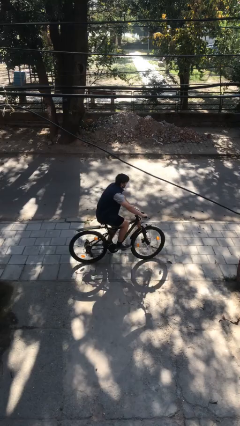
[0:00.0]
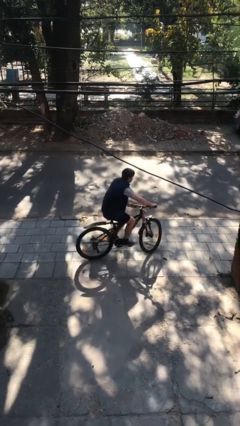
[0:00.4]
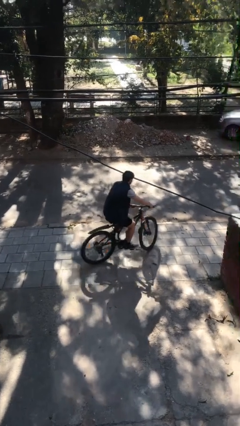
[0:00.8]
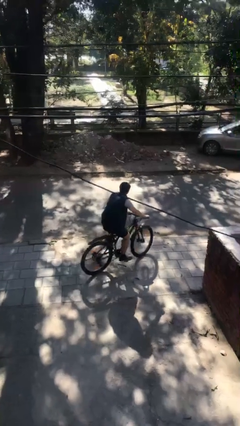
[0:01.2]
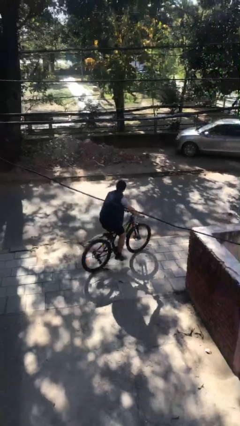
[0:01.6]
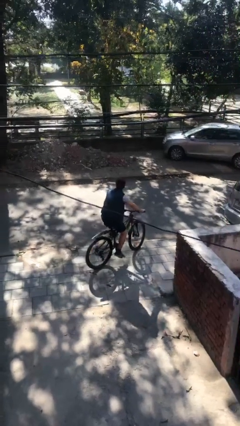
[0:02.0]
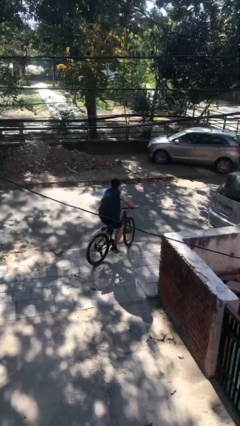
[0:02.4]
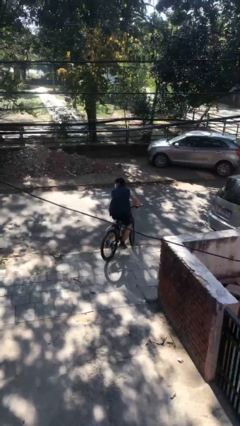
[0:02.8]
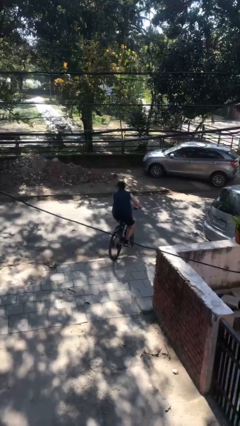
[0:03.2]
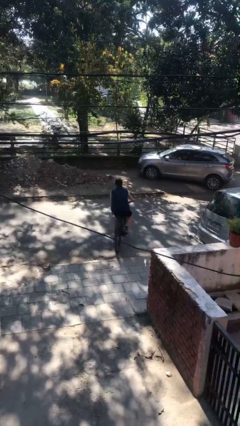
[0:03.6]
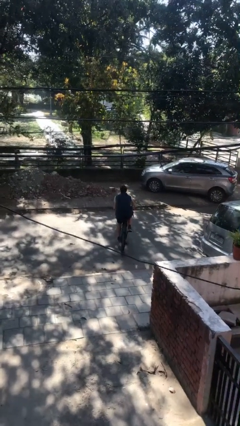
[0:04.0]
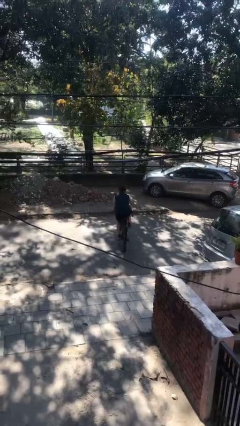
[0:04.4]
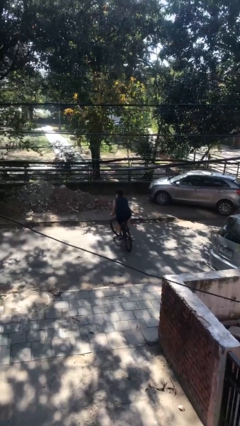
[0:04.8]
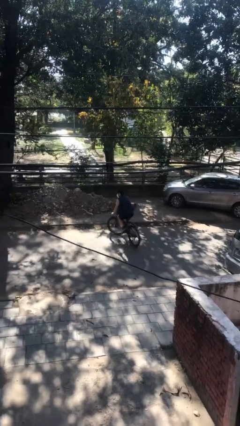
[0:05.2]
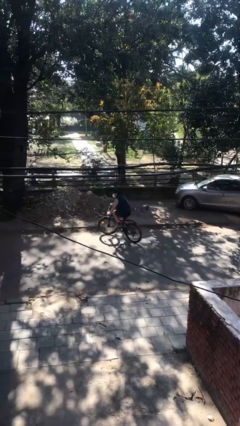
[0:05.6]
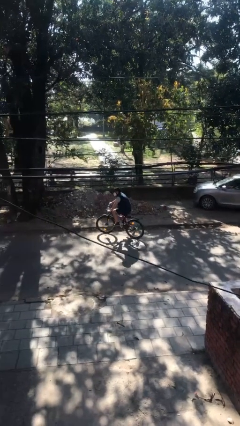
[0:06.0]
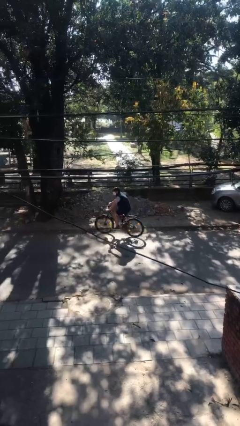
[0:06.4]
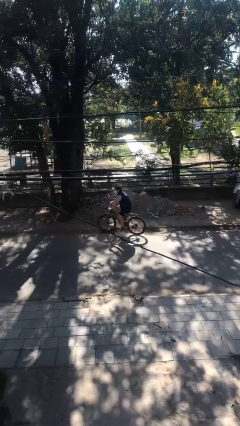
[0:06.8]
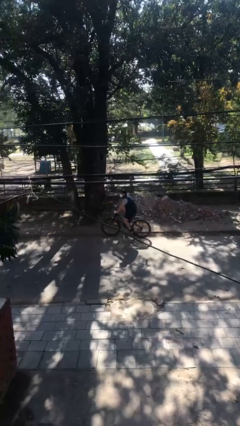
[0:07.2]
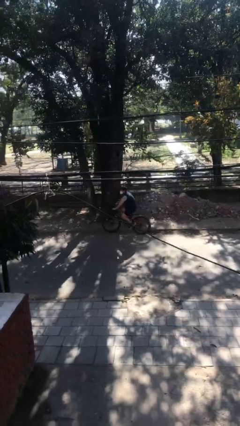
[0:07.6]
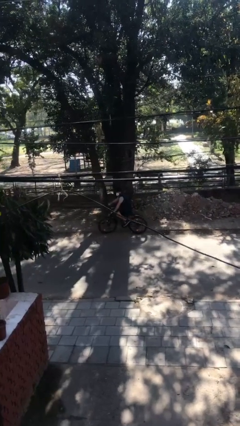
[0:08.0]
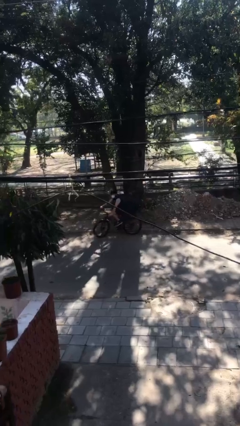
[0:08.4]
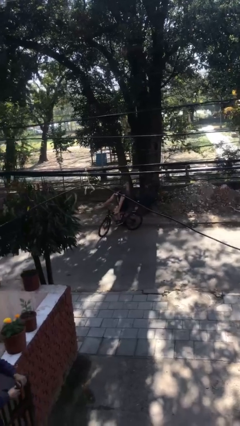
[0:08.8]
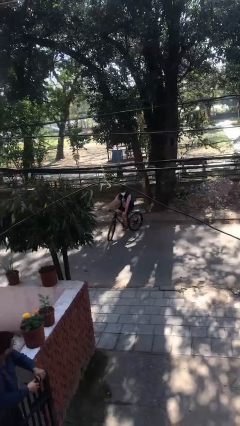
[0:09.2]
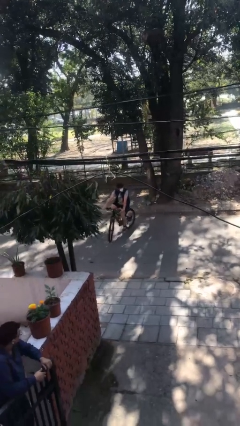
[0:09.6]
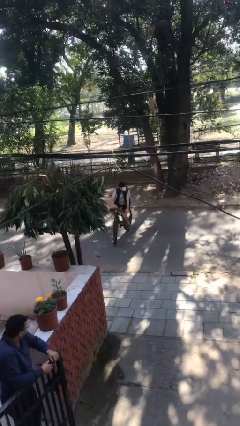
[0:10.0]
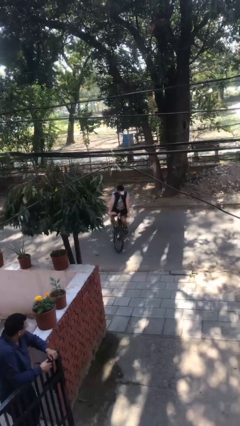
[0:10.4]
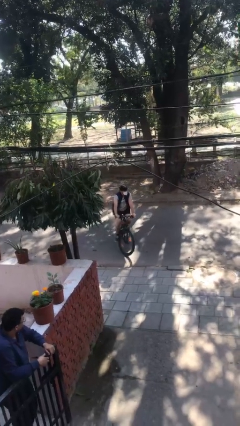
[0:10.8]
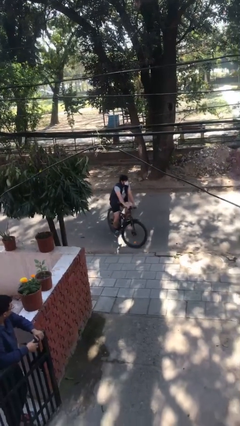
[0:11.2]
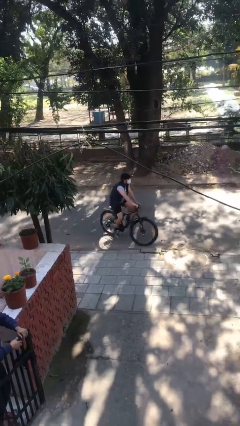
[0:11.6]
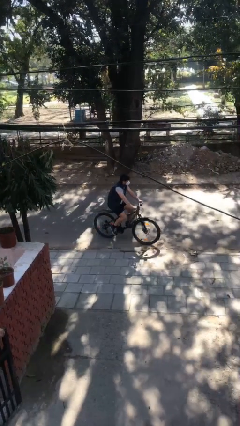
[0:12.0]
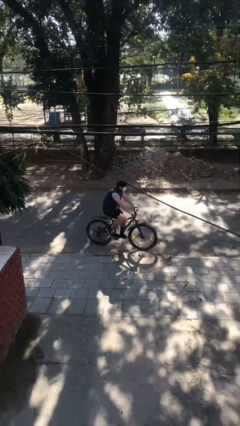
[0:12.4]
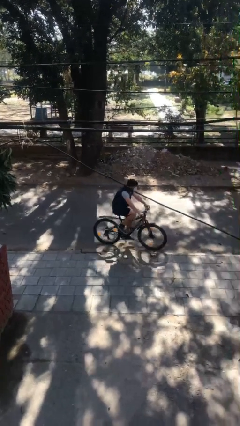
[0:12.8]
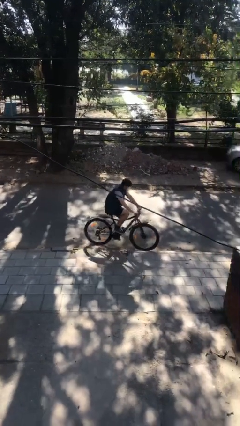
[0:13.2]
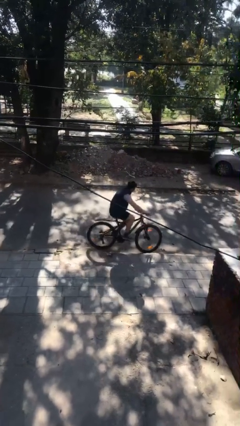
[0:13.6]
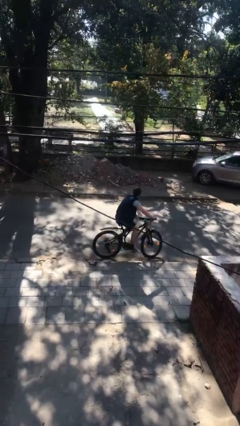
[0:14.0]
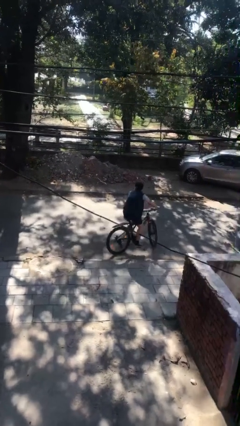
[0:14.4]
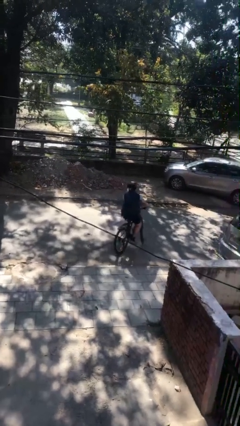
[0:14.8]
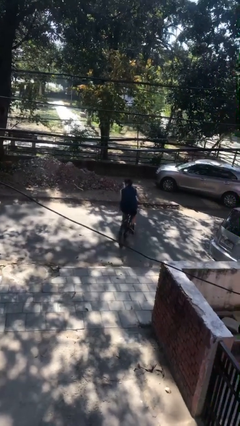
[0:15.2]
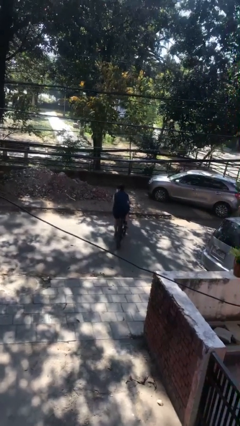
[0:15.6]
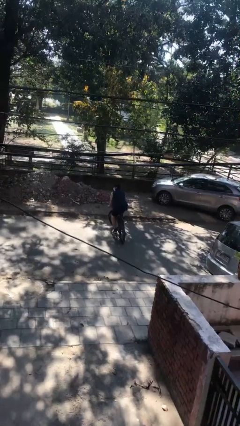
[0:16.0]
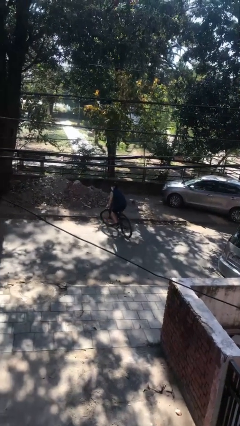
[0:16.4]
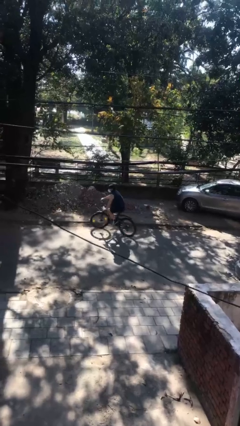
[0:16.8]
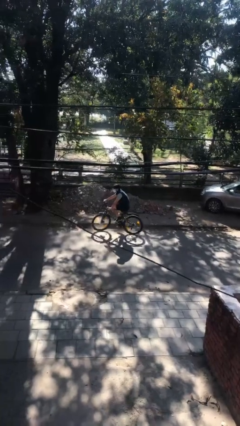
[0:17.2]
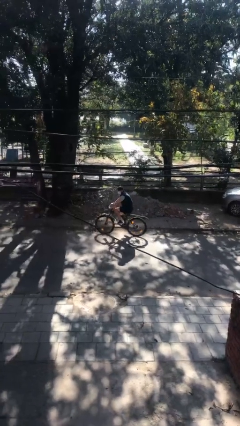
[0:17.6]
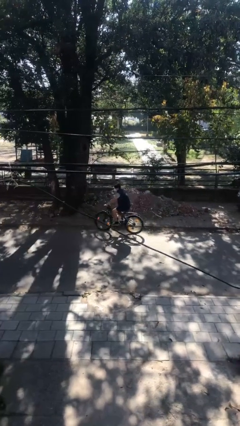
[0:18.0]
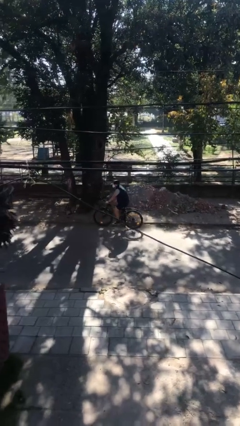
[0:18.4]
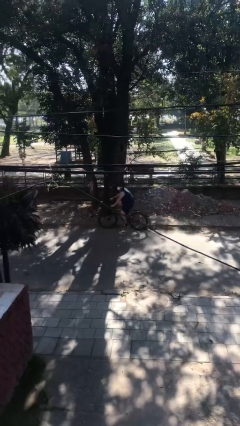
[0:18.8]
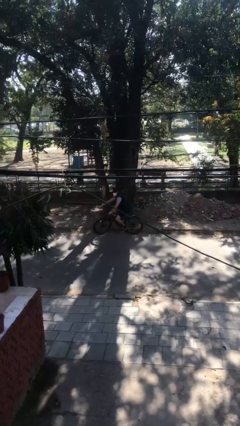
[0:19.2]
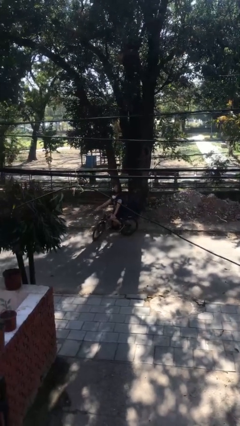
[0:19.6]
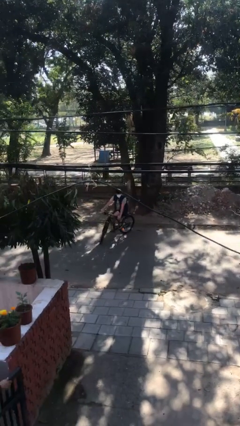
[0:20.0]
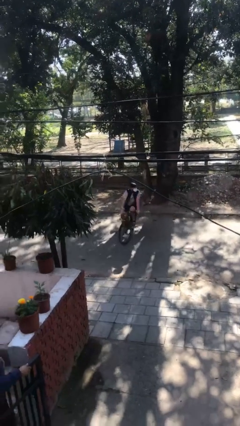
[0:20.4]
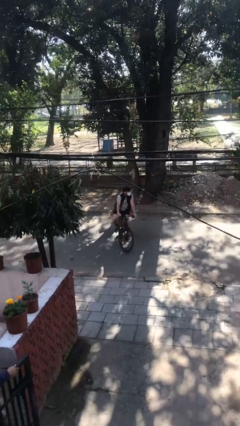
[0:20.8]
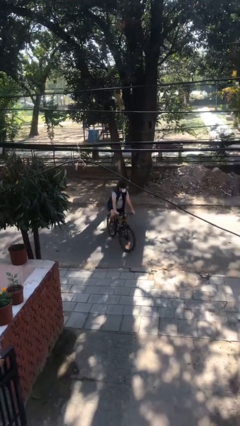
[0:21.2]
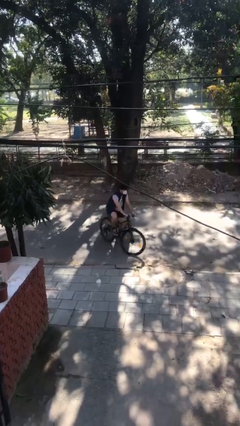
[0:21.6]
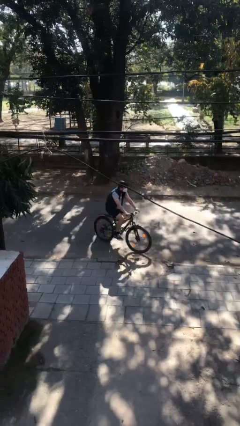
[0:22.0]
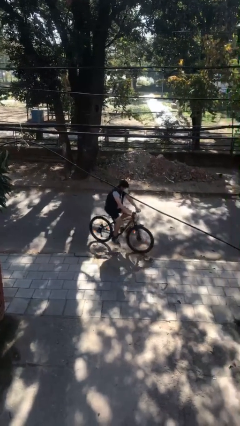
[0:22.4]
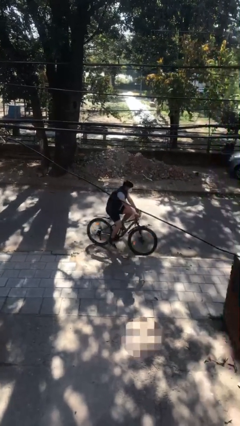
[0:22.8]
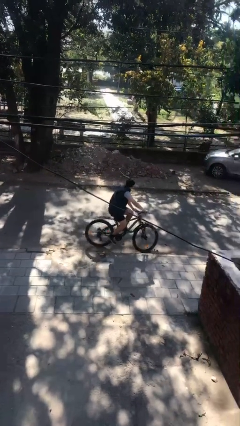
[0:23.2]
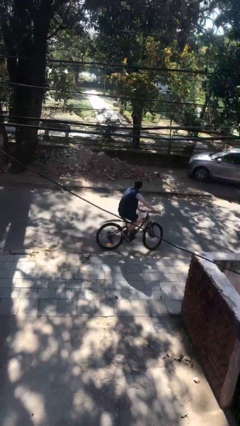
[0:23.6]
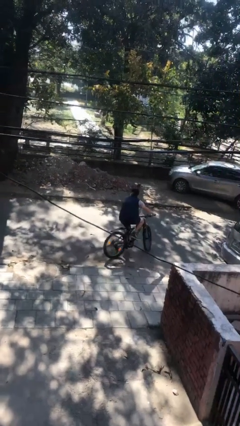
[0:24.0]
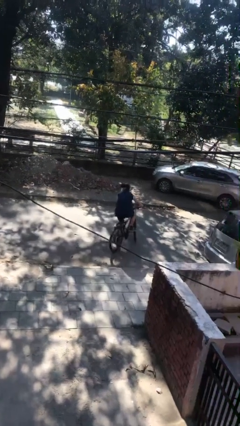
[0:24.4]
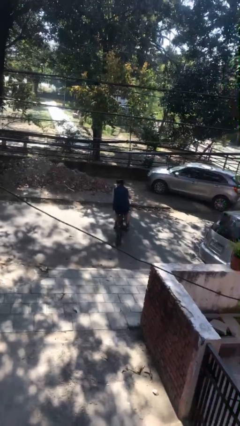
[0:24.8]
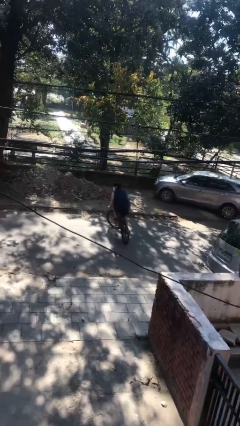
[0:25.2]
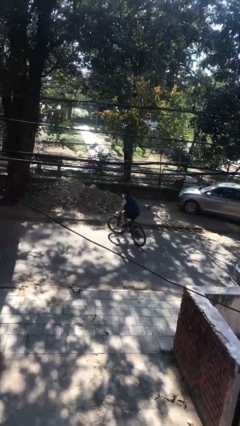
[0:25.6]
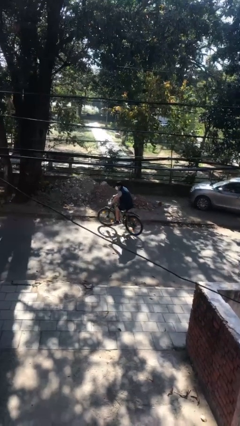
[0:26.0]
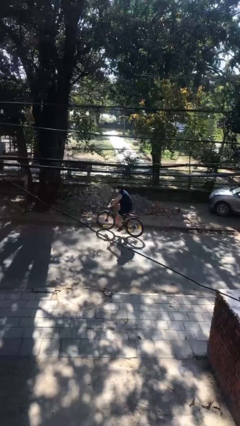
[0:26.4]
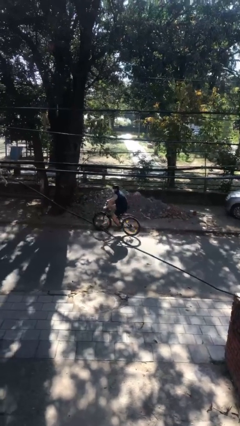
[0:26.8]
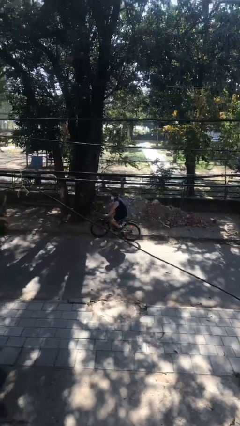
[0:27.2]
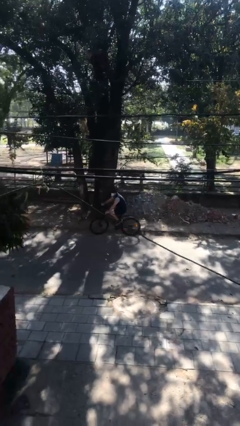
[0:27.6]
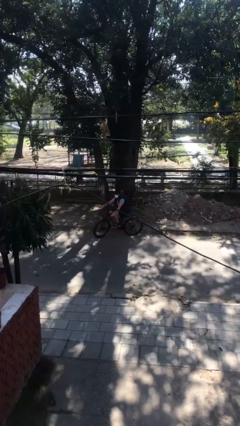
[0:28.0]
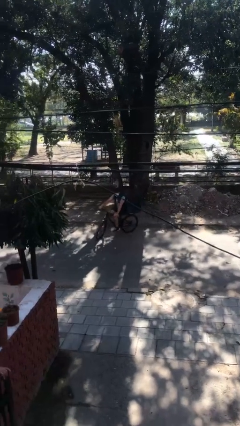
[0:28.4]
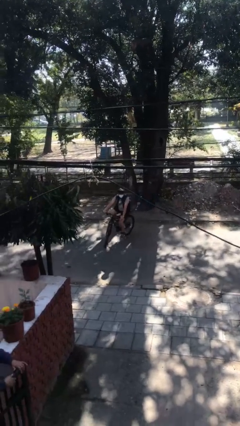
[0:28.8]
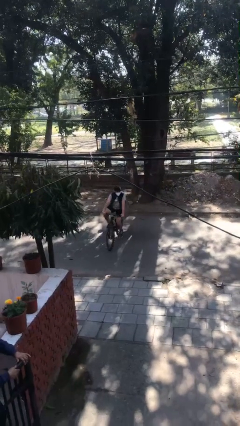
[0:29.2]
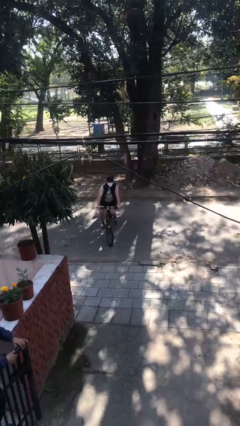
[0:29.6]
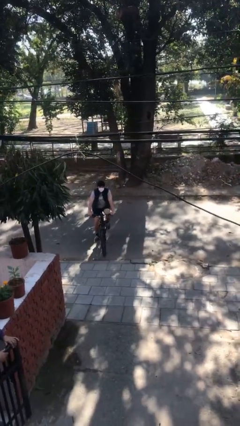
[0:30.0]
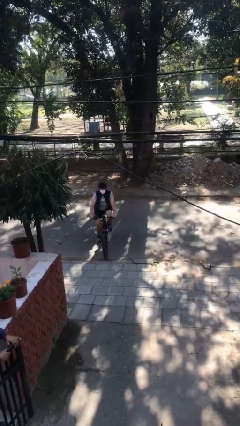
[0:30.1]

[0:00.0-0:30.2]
person rides bicycle

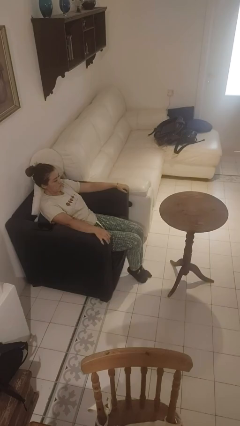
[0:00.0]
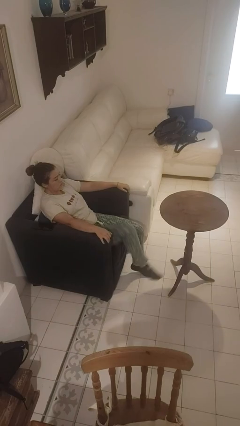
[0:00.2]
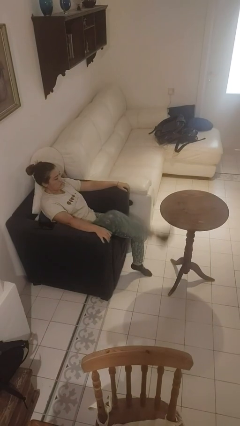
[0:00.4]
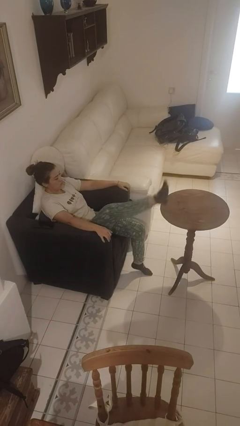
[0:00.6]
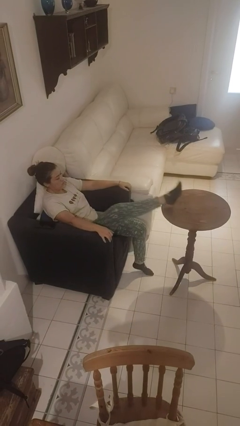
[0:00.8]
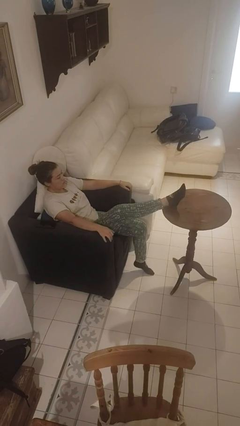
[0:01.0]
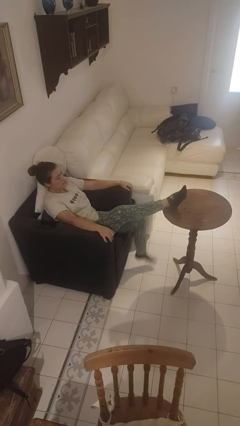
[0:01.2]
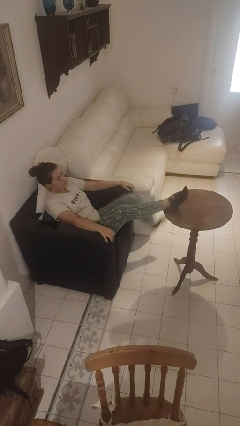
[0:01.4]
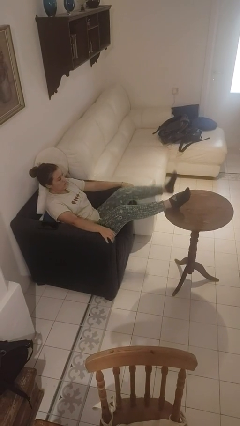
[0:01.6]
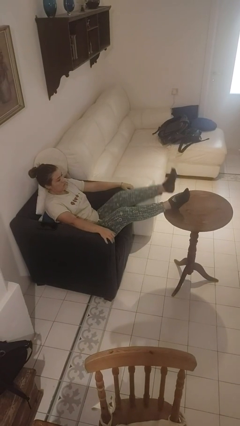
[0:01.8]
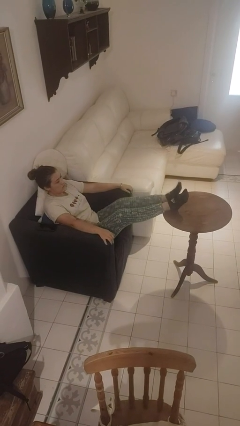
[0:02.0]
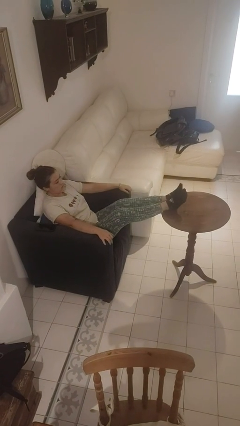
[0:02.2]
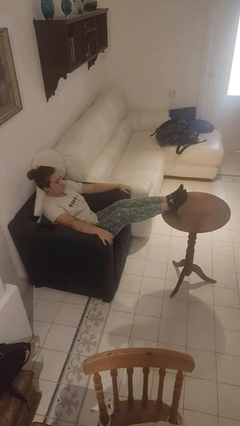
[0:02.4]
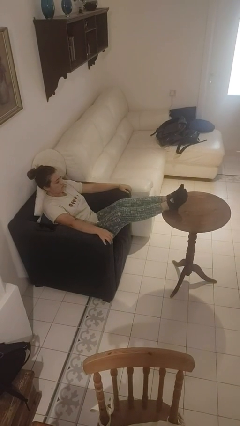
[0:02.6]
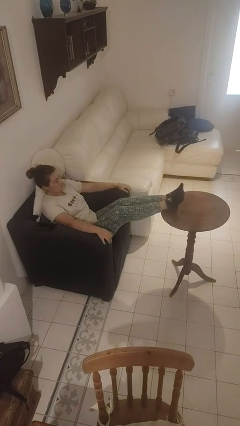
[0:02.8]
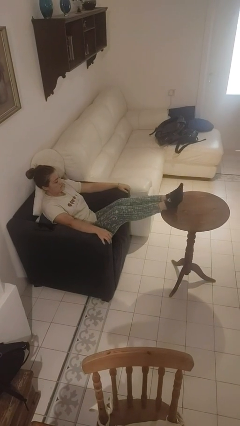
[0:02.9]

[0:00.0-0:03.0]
person puts feet up

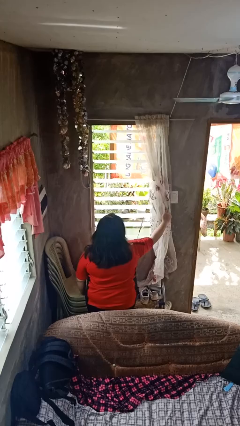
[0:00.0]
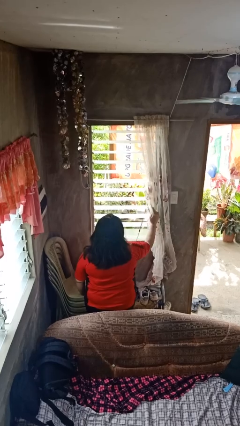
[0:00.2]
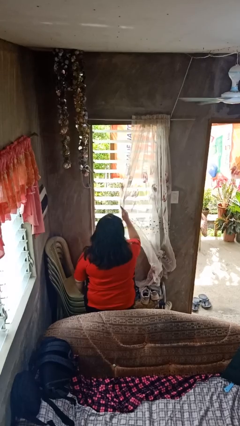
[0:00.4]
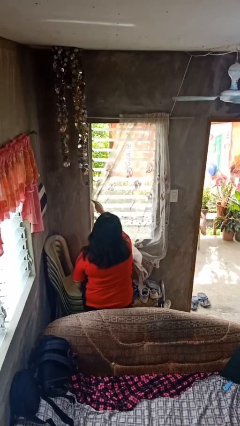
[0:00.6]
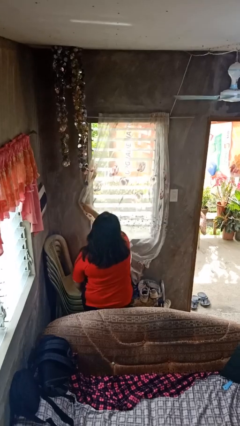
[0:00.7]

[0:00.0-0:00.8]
person closes curtains
